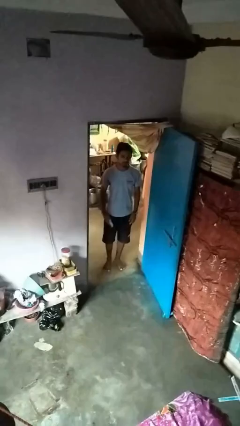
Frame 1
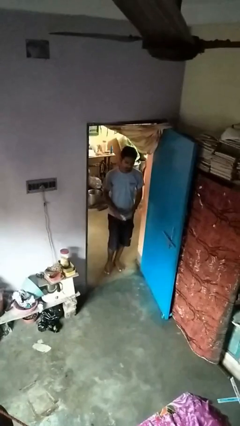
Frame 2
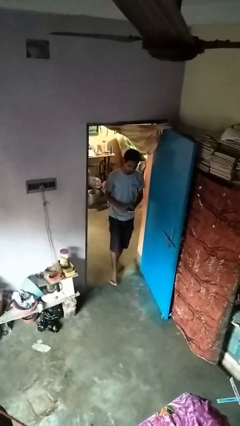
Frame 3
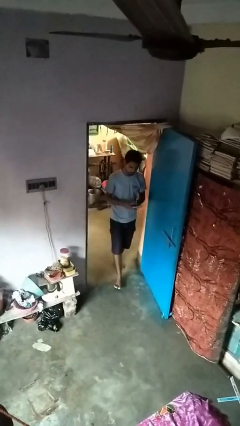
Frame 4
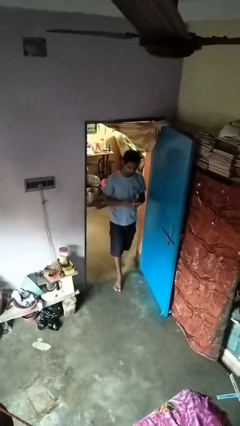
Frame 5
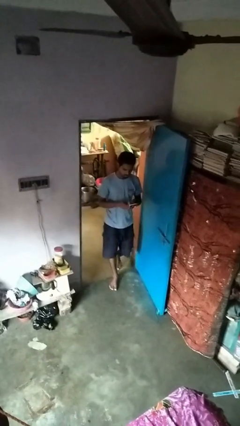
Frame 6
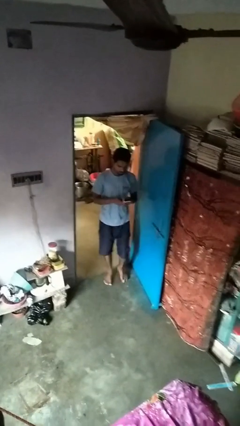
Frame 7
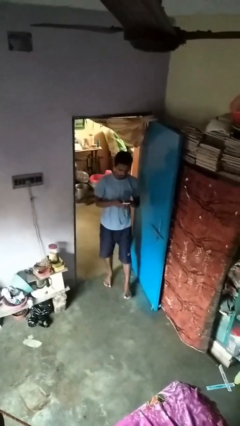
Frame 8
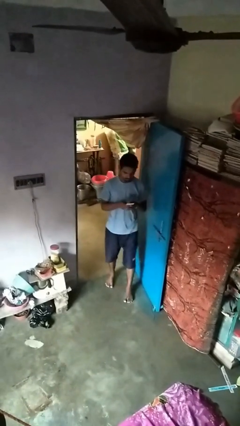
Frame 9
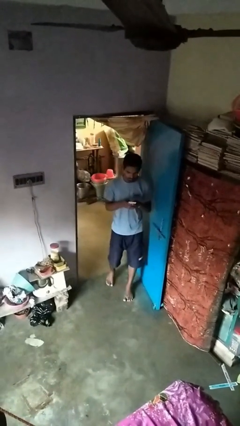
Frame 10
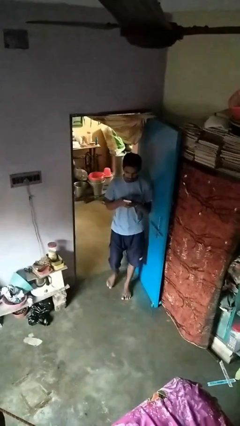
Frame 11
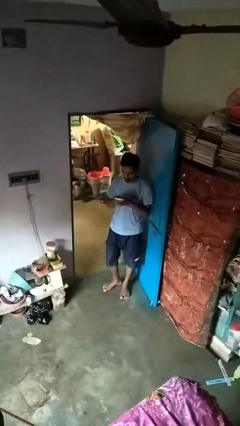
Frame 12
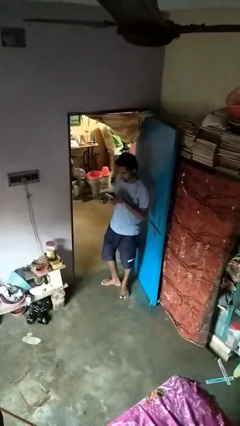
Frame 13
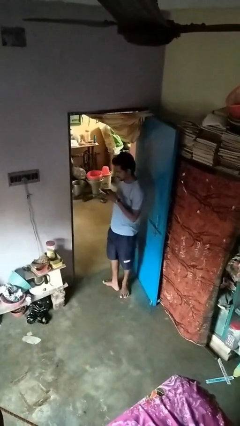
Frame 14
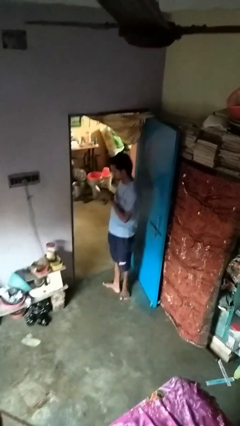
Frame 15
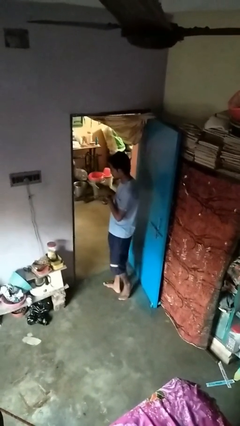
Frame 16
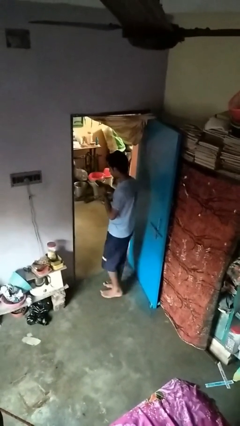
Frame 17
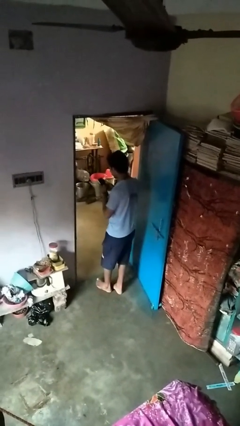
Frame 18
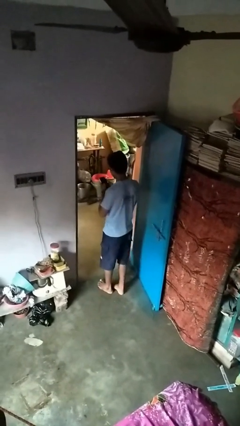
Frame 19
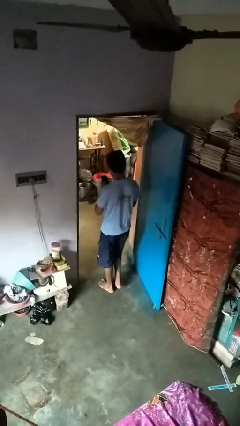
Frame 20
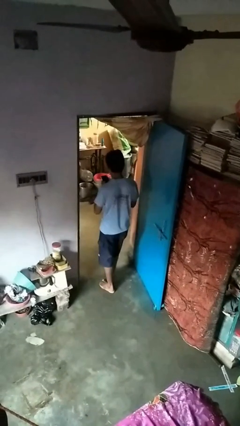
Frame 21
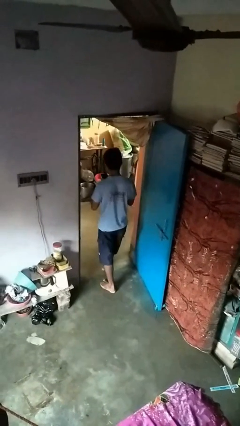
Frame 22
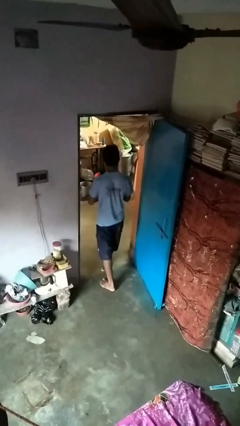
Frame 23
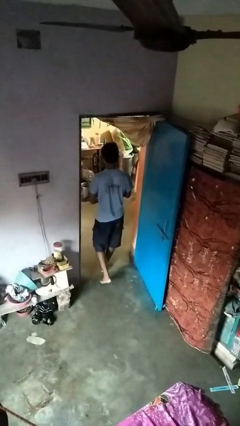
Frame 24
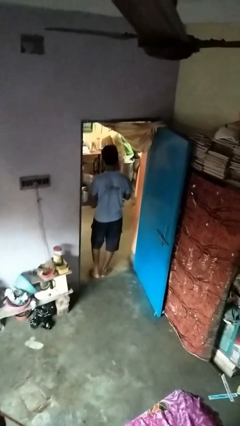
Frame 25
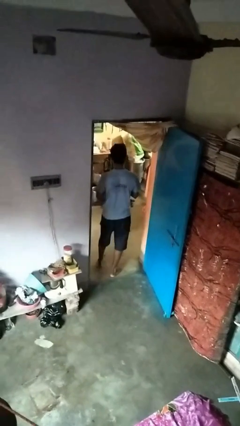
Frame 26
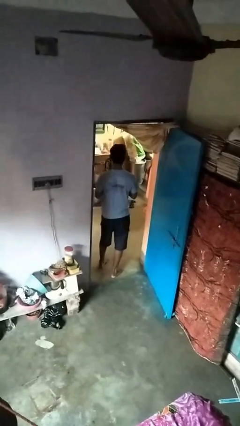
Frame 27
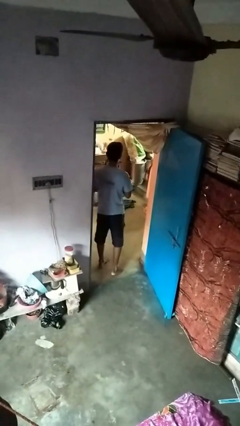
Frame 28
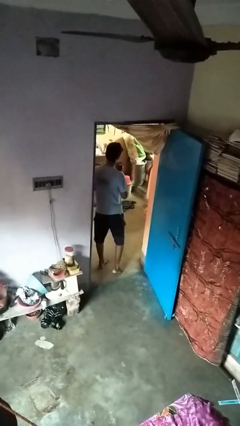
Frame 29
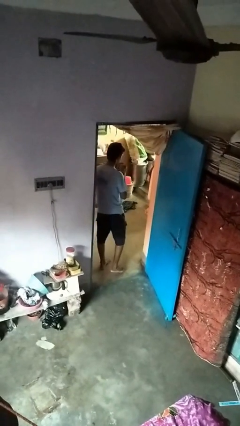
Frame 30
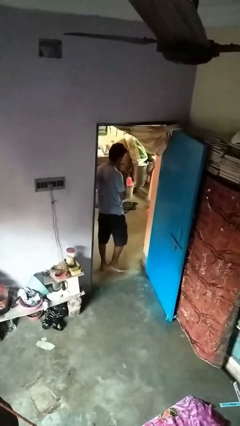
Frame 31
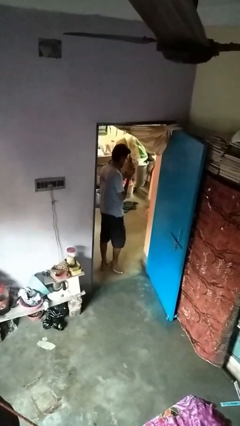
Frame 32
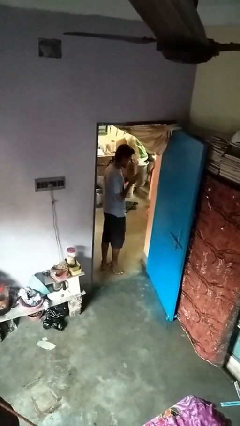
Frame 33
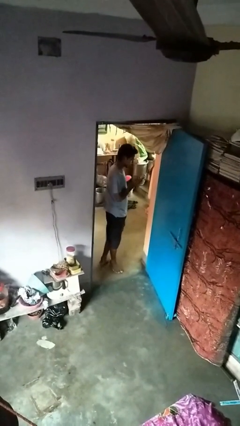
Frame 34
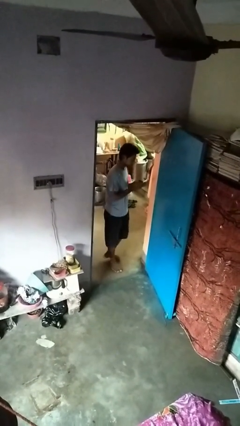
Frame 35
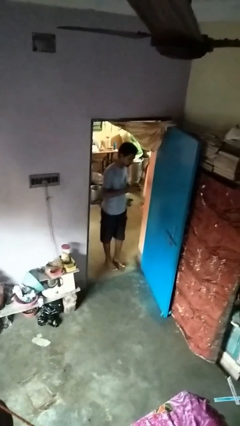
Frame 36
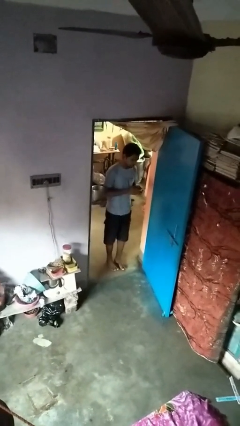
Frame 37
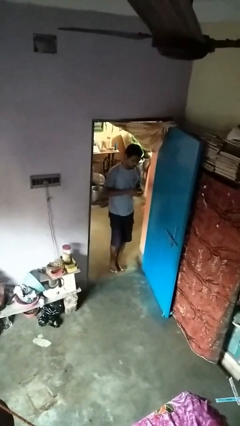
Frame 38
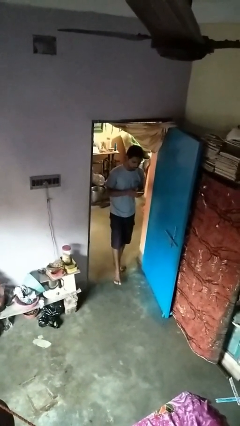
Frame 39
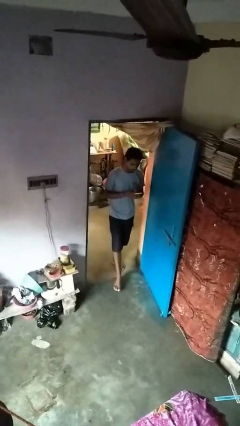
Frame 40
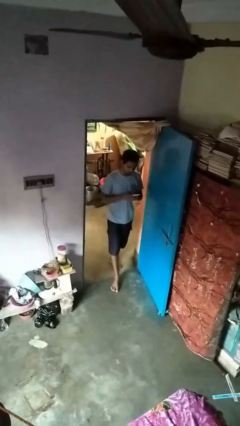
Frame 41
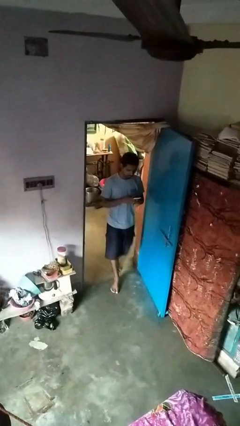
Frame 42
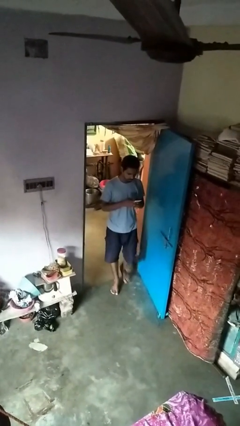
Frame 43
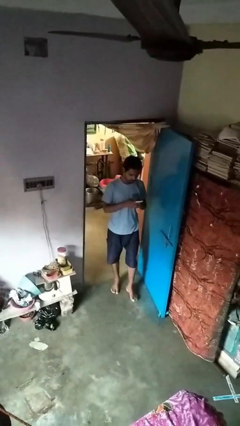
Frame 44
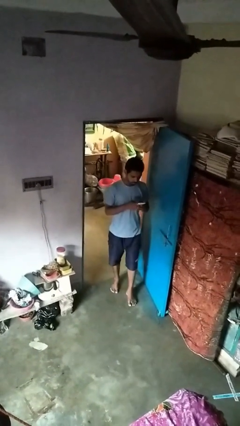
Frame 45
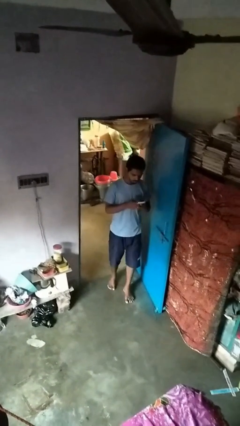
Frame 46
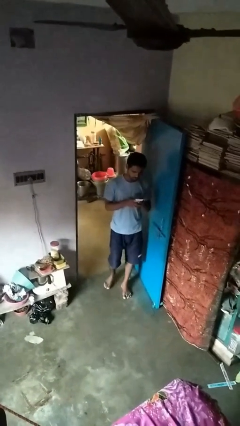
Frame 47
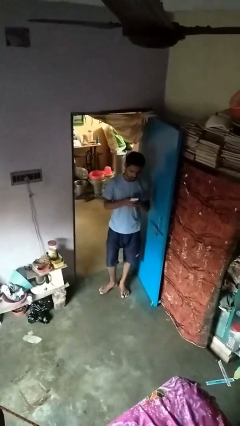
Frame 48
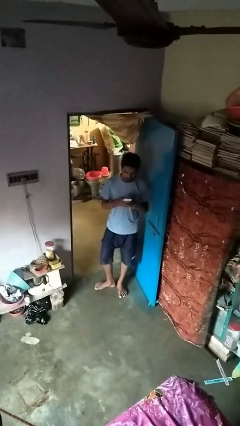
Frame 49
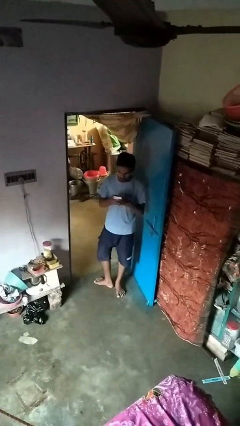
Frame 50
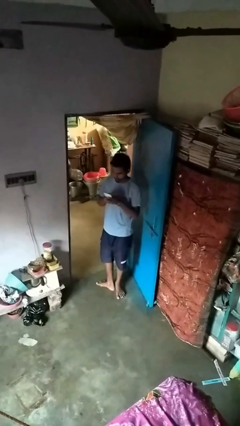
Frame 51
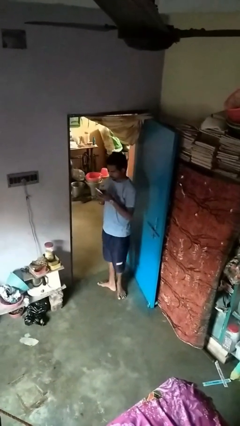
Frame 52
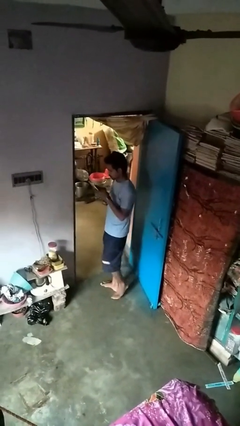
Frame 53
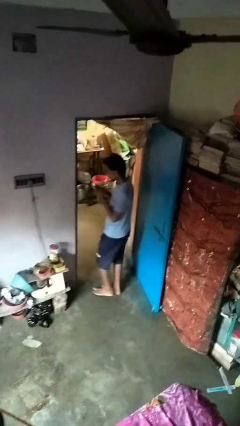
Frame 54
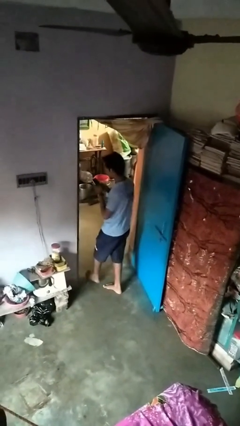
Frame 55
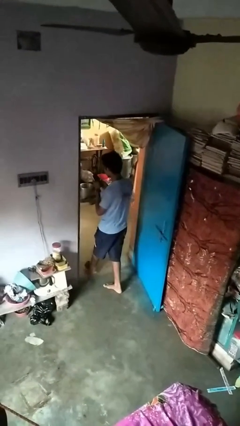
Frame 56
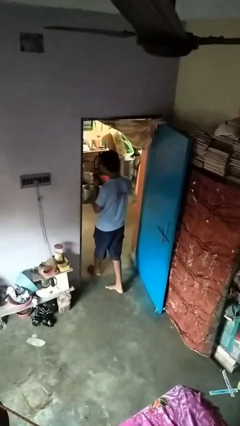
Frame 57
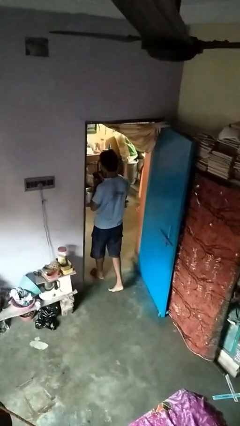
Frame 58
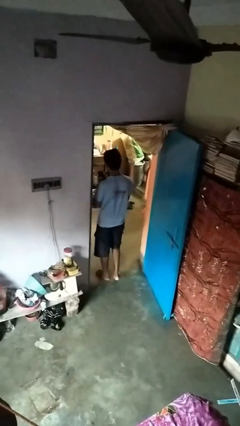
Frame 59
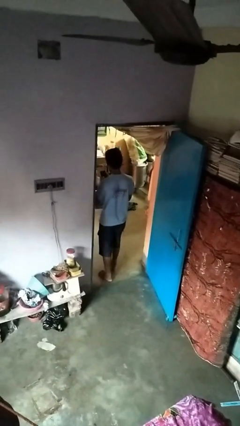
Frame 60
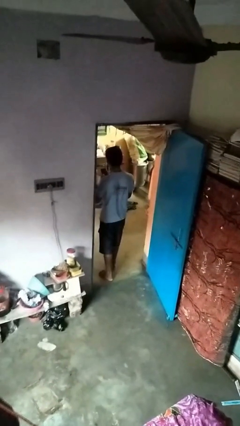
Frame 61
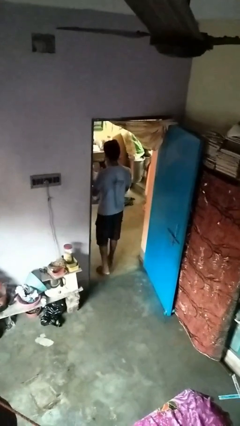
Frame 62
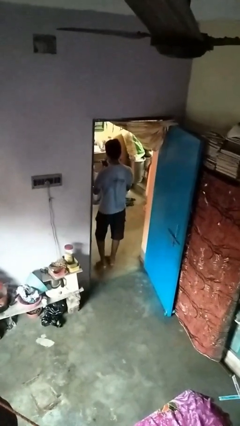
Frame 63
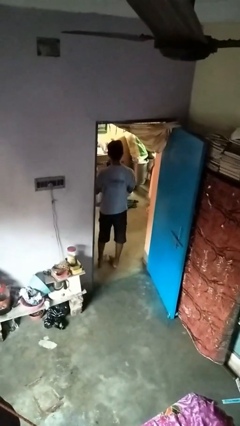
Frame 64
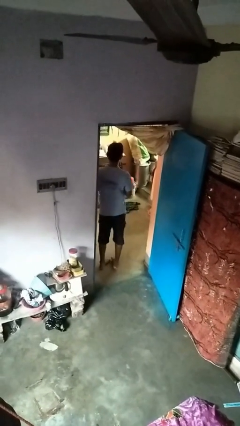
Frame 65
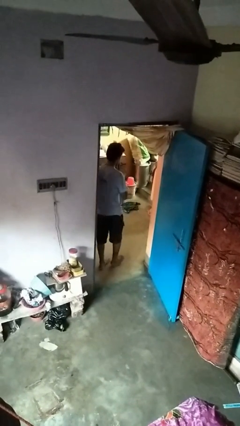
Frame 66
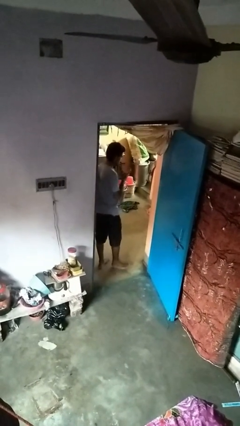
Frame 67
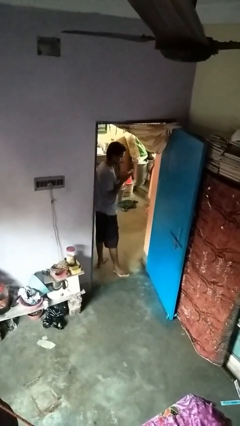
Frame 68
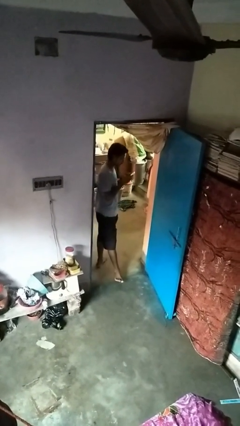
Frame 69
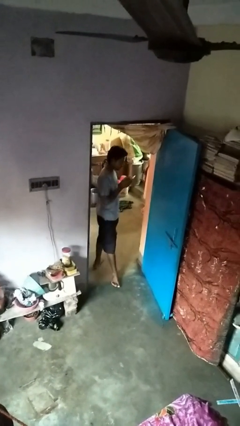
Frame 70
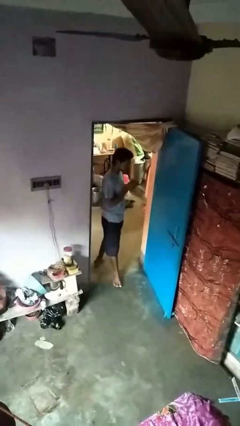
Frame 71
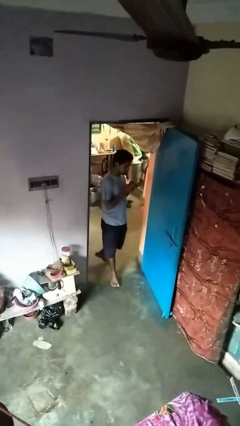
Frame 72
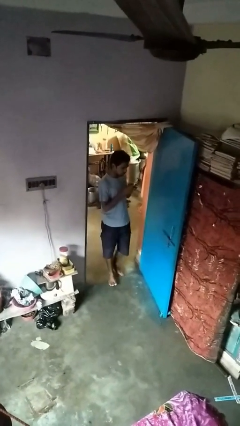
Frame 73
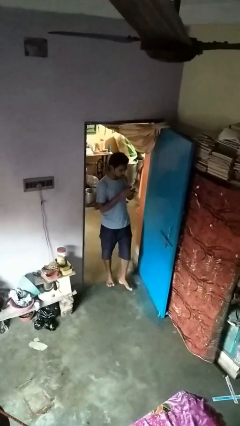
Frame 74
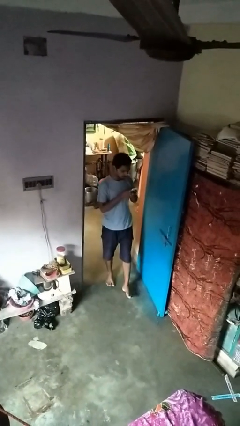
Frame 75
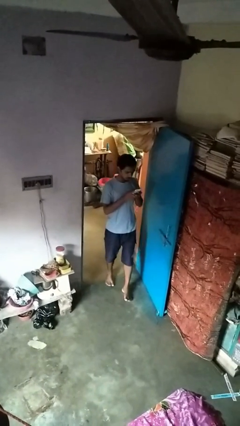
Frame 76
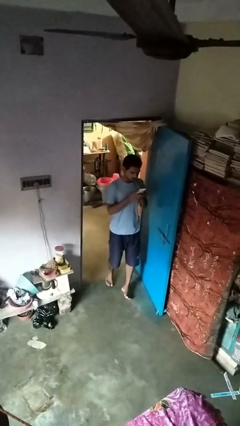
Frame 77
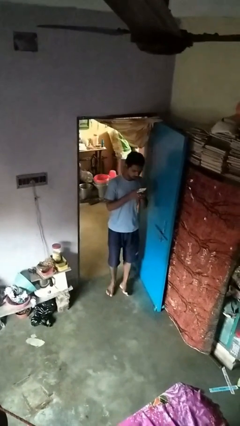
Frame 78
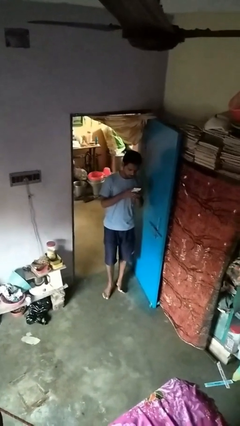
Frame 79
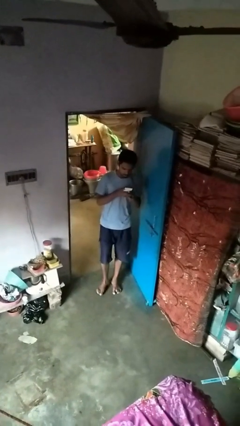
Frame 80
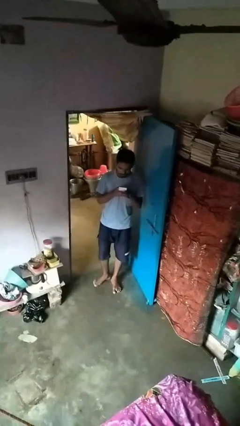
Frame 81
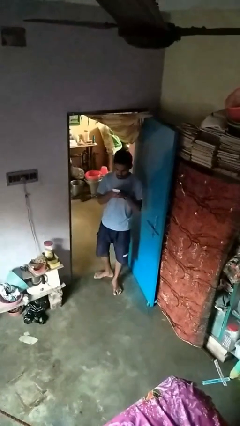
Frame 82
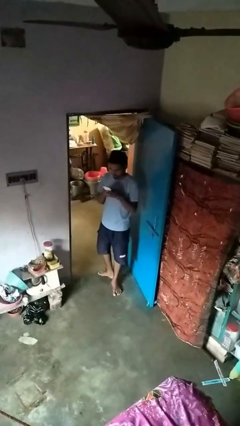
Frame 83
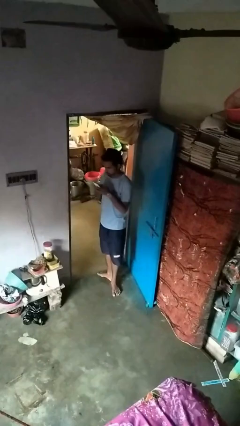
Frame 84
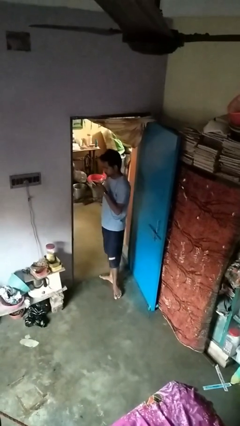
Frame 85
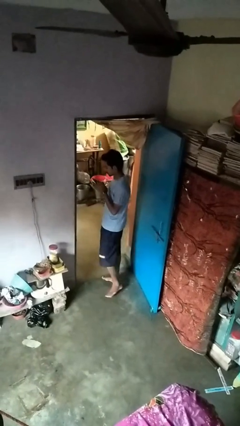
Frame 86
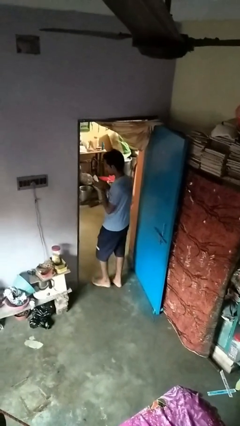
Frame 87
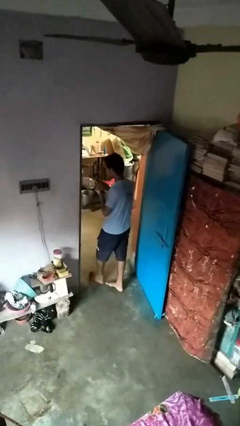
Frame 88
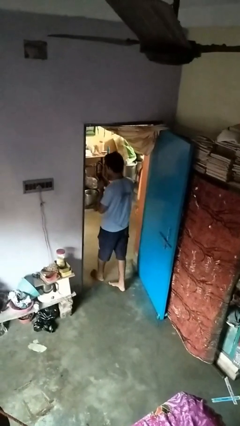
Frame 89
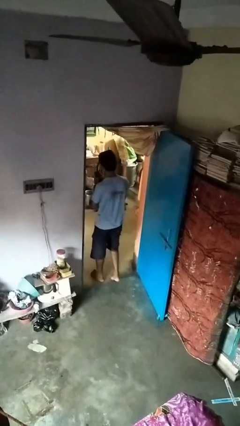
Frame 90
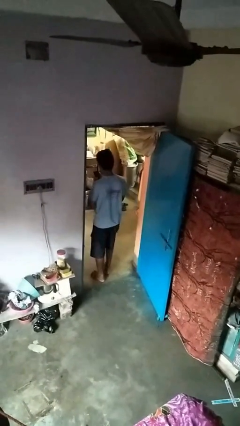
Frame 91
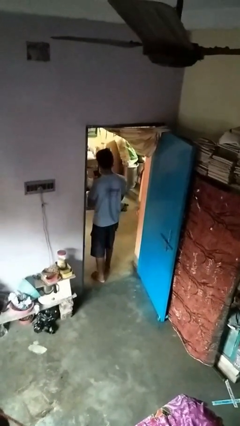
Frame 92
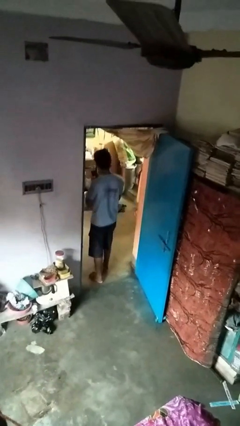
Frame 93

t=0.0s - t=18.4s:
person texts on phone
